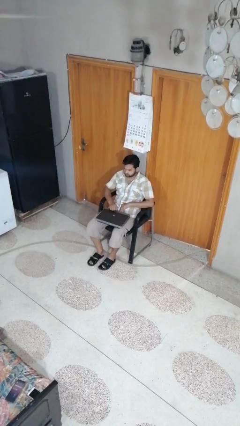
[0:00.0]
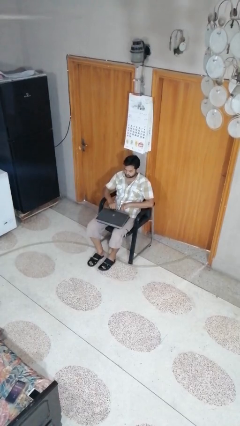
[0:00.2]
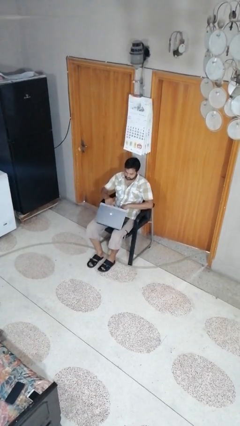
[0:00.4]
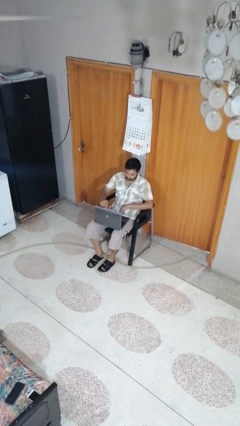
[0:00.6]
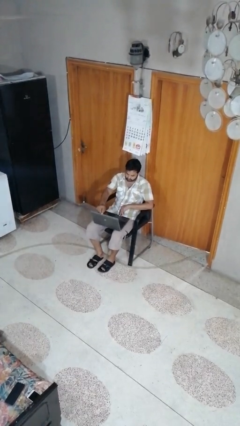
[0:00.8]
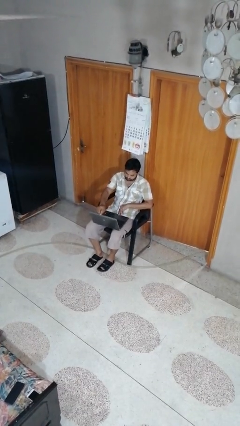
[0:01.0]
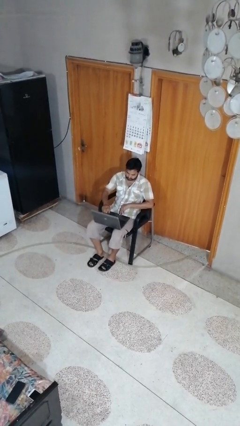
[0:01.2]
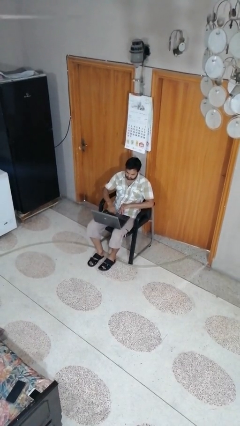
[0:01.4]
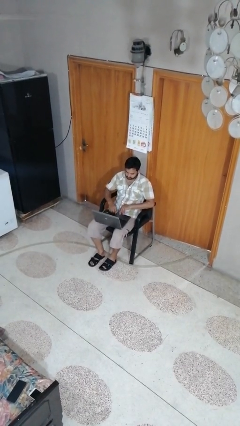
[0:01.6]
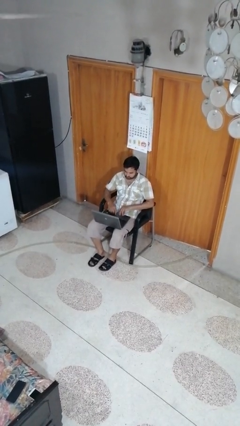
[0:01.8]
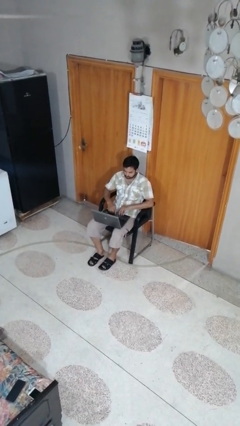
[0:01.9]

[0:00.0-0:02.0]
person opens laptop

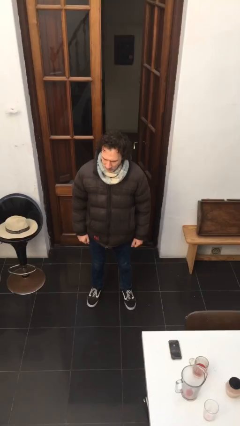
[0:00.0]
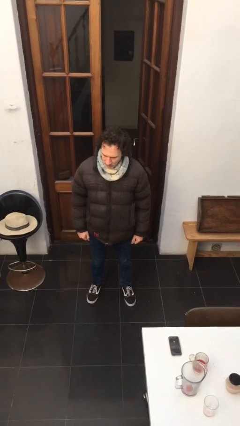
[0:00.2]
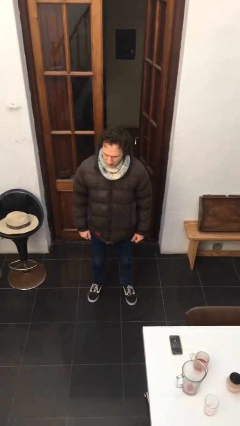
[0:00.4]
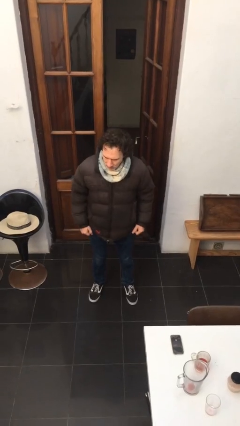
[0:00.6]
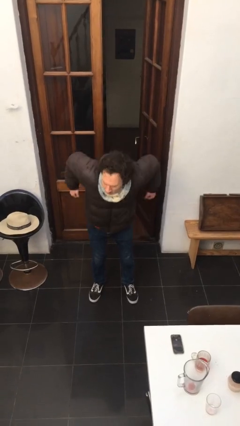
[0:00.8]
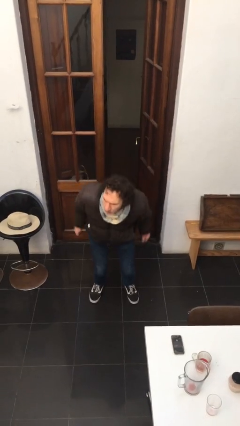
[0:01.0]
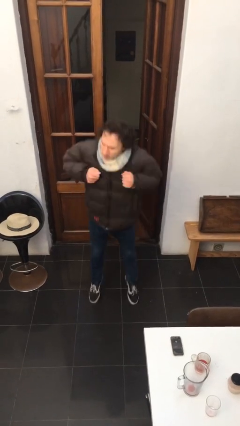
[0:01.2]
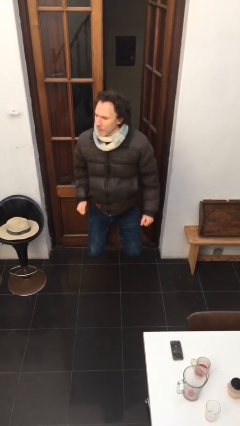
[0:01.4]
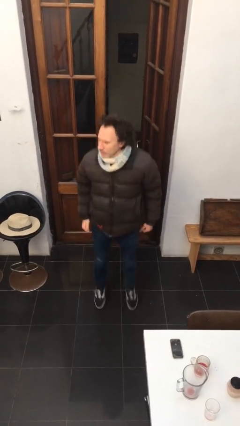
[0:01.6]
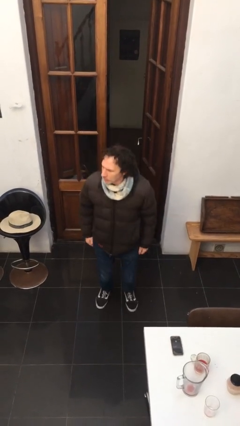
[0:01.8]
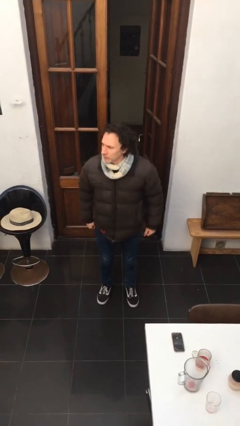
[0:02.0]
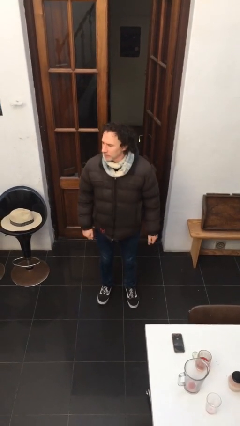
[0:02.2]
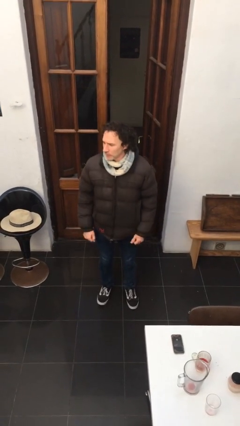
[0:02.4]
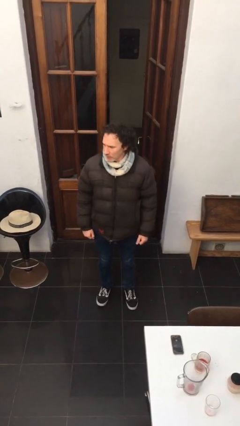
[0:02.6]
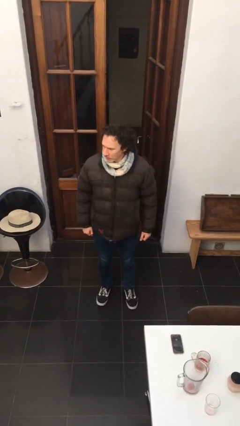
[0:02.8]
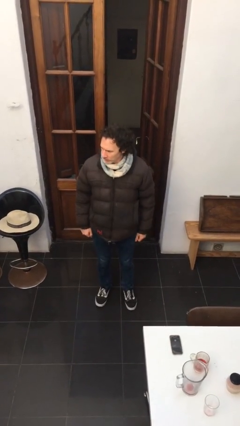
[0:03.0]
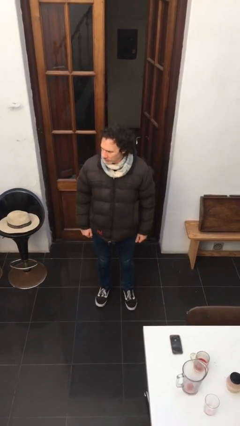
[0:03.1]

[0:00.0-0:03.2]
person jumps

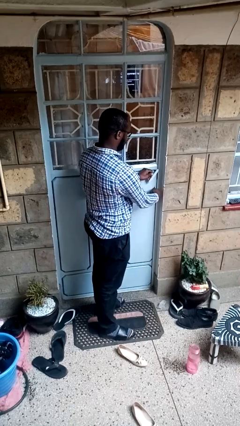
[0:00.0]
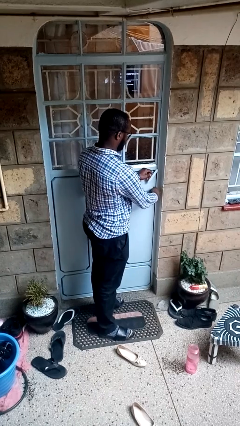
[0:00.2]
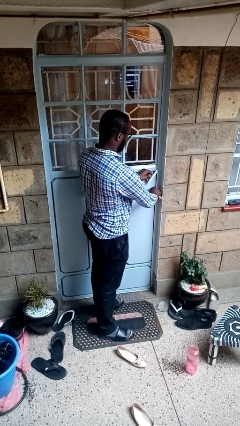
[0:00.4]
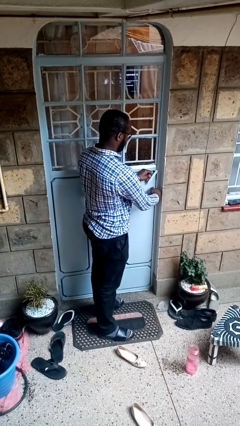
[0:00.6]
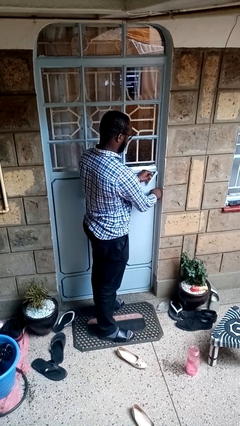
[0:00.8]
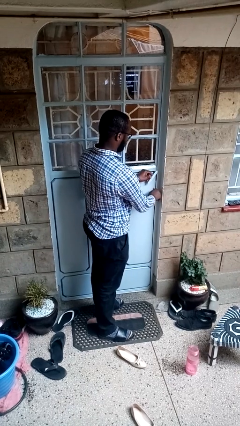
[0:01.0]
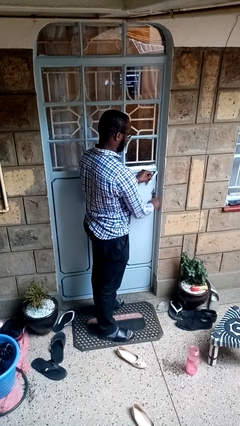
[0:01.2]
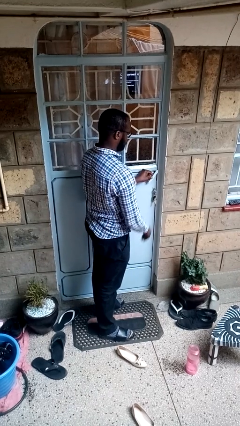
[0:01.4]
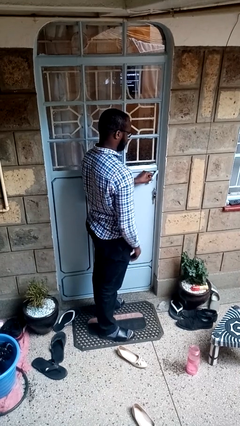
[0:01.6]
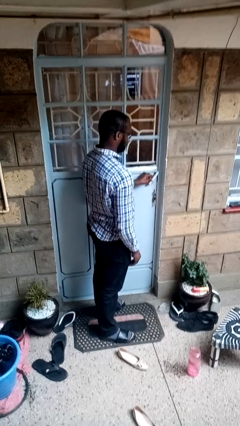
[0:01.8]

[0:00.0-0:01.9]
person unlocks door with keys

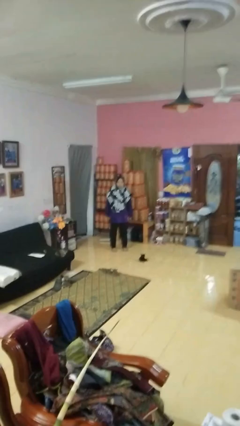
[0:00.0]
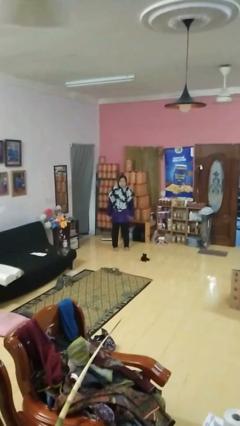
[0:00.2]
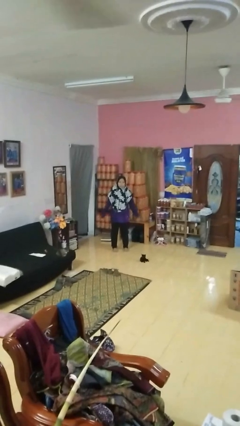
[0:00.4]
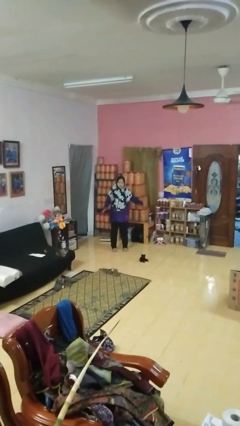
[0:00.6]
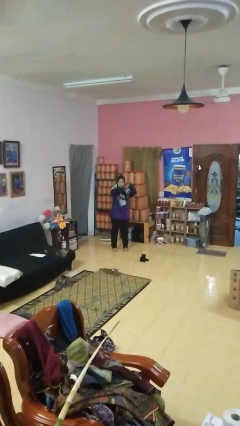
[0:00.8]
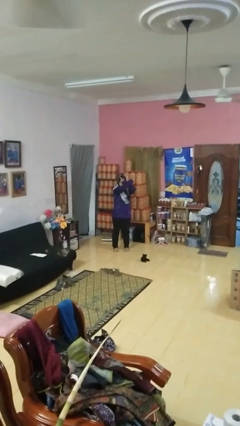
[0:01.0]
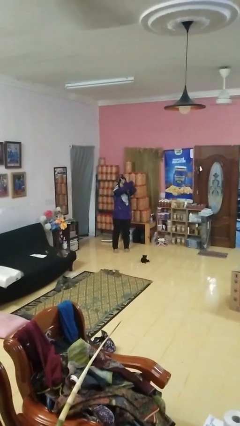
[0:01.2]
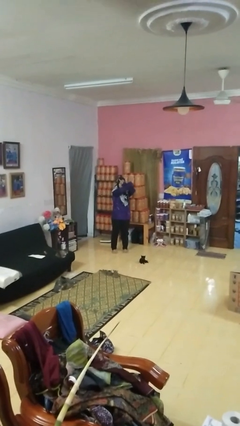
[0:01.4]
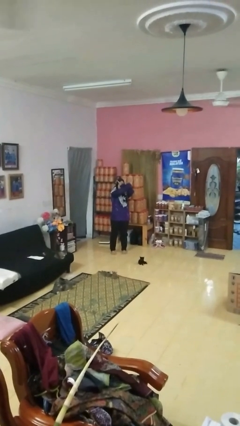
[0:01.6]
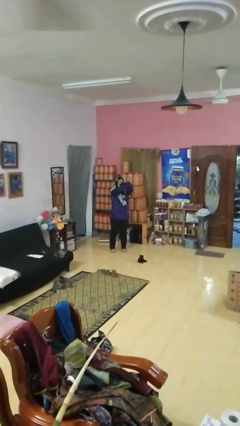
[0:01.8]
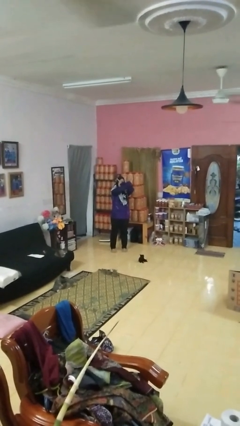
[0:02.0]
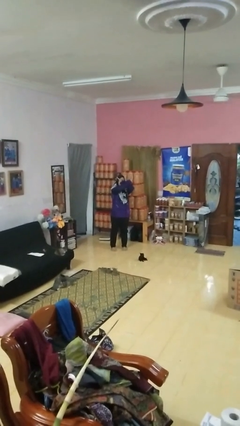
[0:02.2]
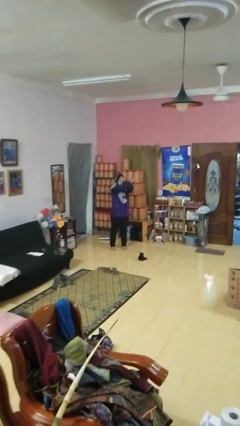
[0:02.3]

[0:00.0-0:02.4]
person gestures arms x

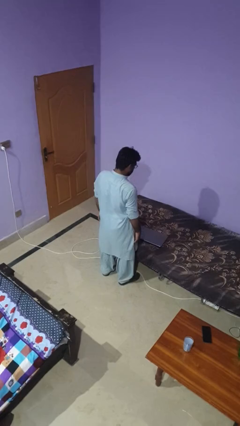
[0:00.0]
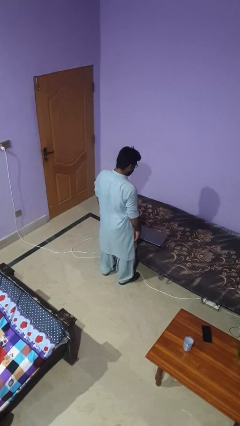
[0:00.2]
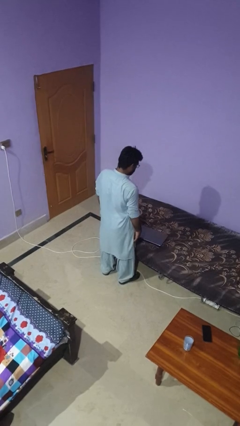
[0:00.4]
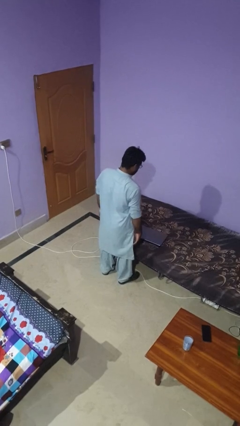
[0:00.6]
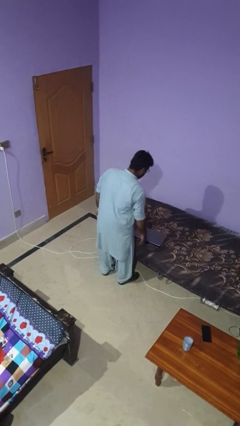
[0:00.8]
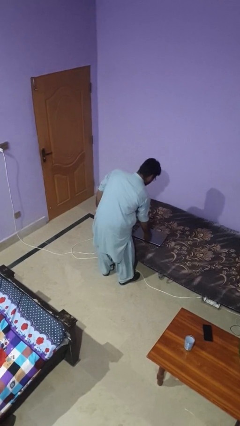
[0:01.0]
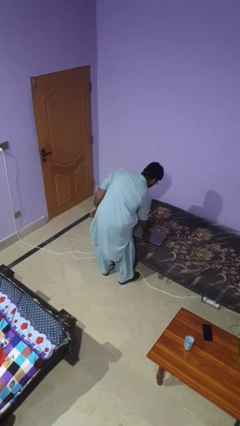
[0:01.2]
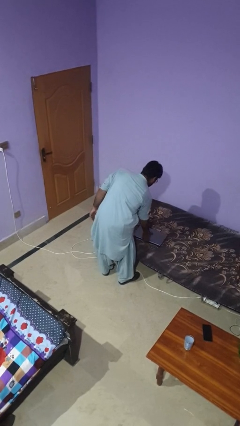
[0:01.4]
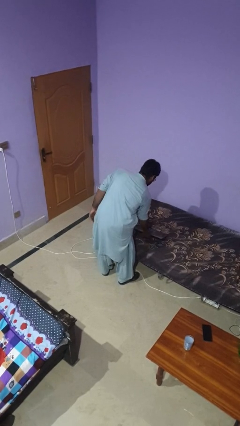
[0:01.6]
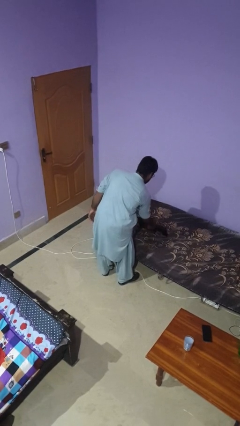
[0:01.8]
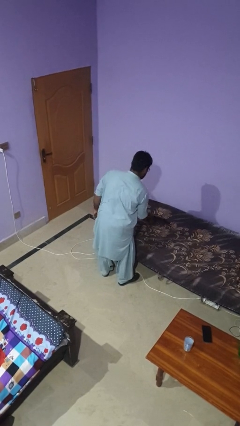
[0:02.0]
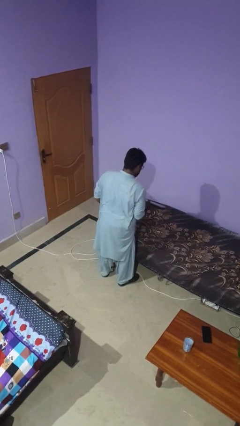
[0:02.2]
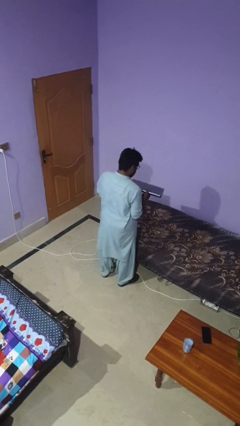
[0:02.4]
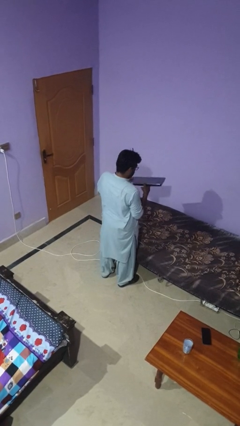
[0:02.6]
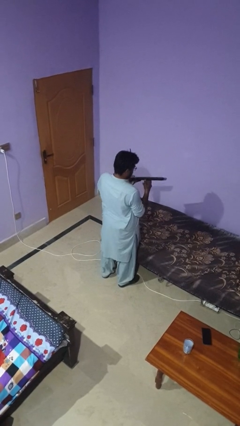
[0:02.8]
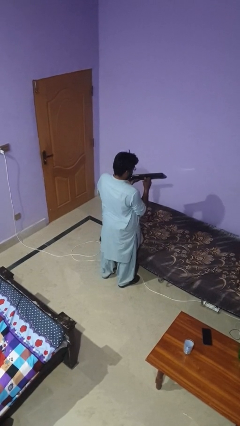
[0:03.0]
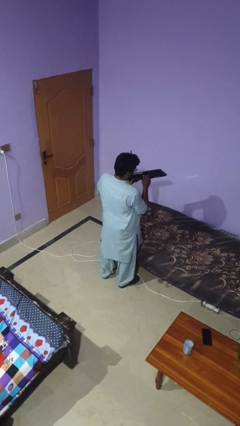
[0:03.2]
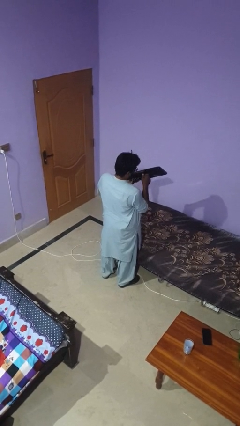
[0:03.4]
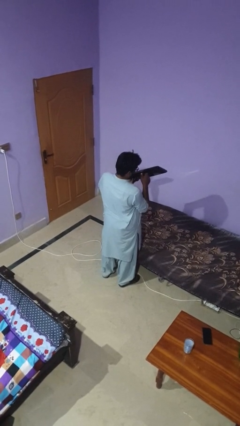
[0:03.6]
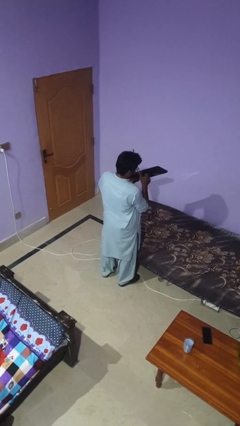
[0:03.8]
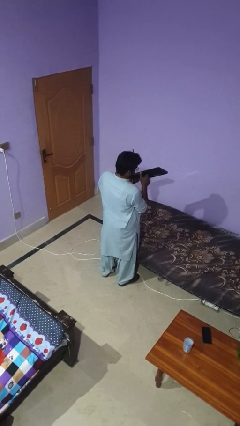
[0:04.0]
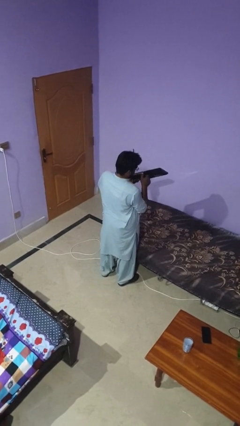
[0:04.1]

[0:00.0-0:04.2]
person picks up object from bed

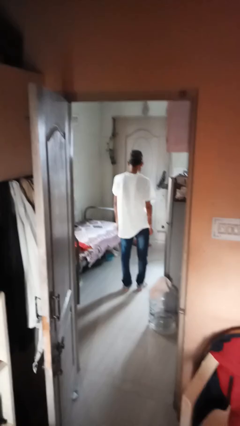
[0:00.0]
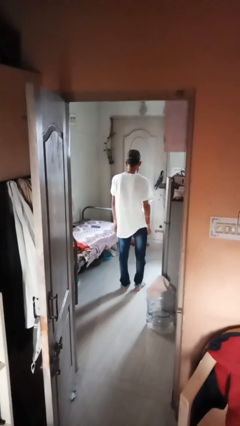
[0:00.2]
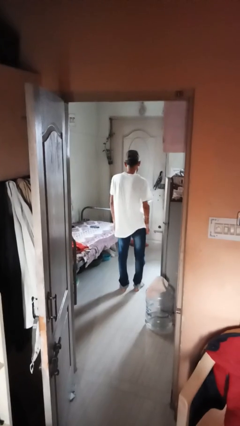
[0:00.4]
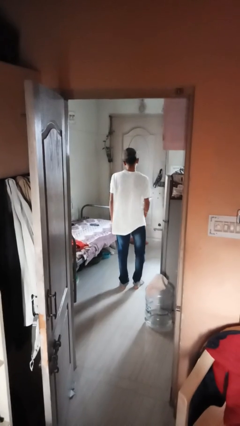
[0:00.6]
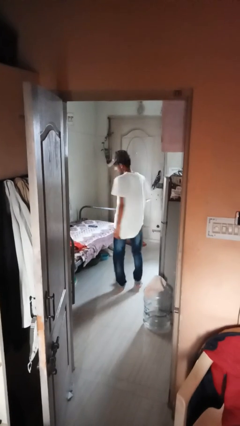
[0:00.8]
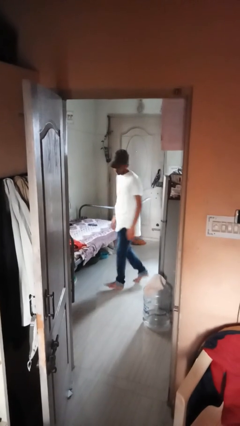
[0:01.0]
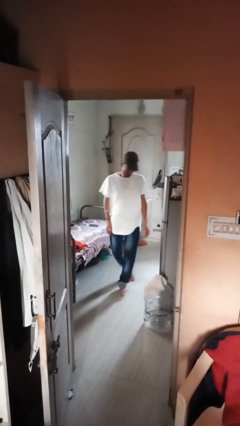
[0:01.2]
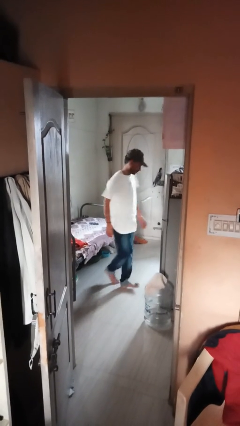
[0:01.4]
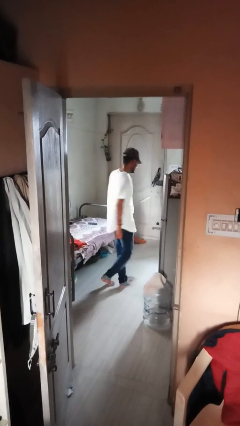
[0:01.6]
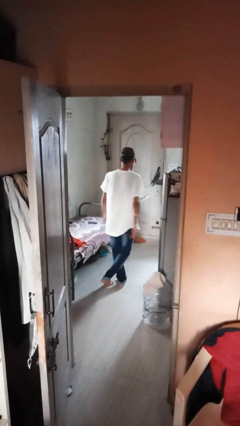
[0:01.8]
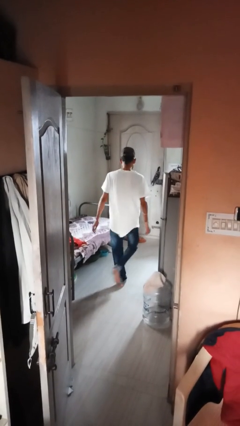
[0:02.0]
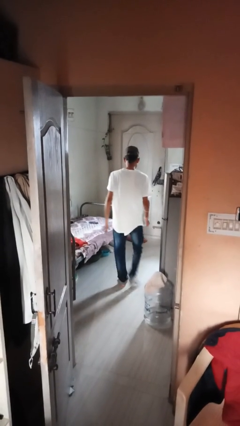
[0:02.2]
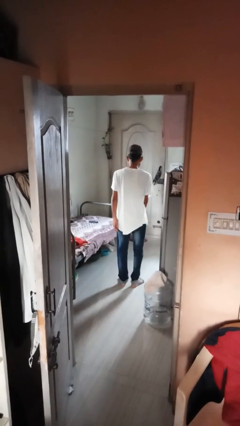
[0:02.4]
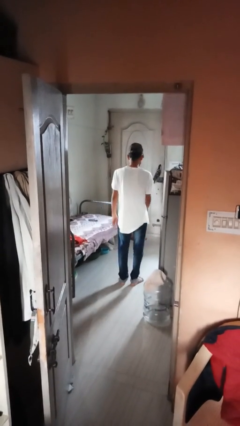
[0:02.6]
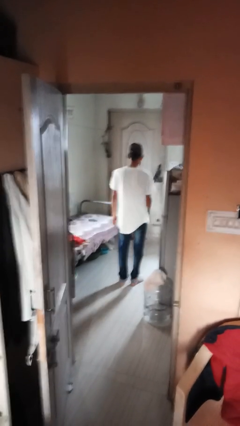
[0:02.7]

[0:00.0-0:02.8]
person twirls

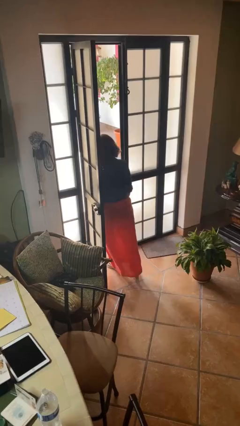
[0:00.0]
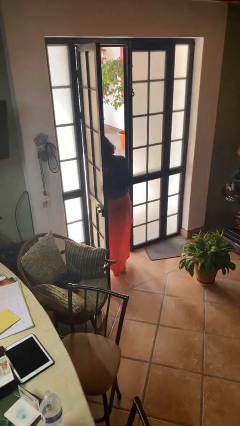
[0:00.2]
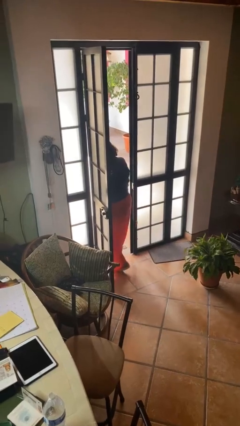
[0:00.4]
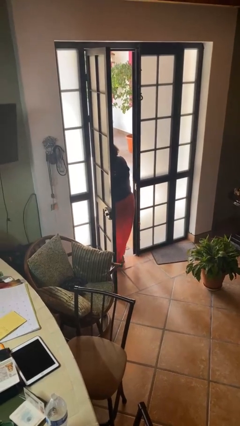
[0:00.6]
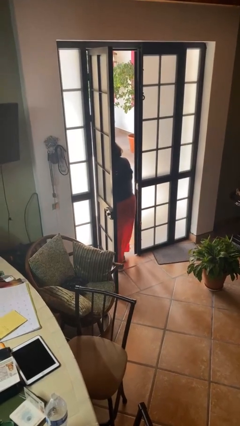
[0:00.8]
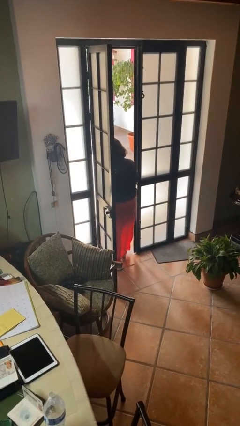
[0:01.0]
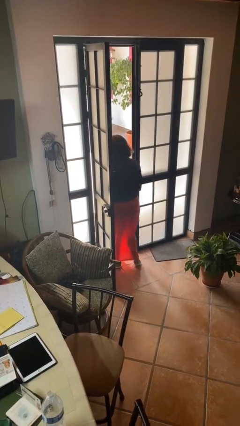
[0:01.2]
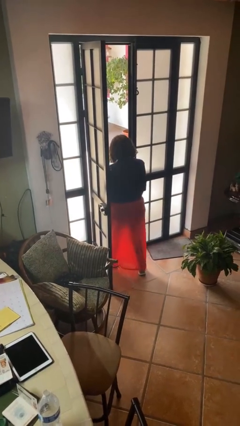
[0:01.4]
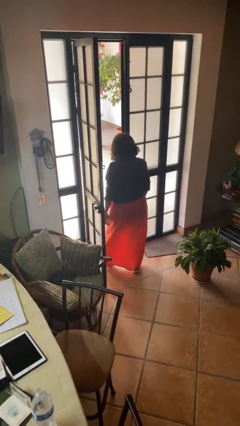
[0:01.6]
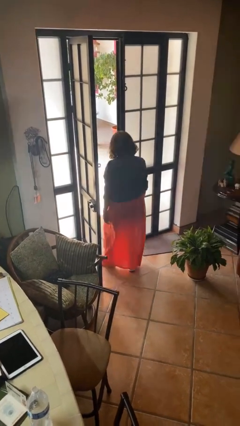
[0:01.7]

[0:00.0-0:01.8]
person bumps into wall
